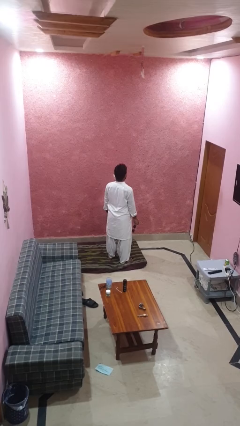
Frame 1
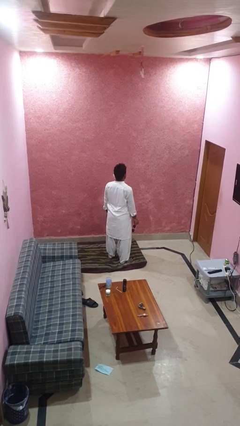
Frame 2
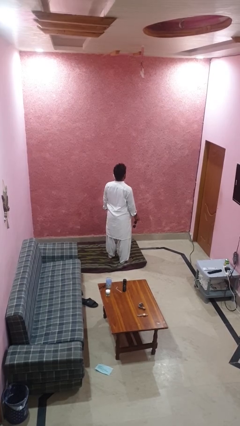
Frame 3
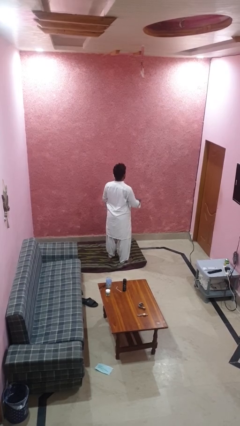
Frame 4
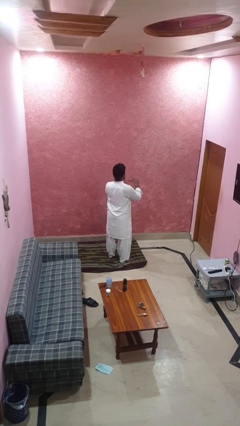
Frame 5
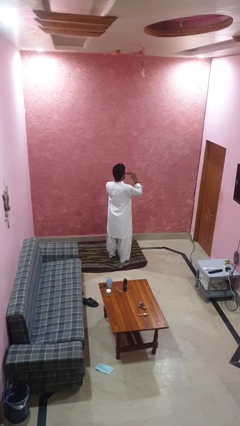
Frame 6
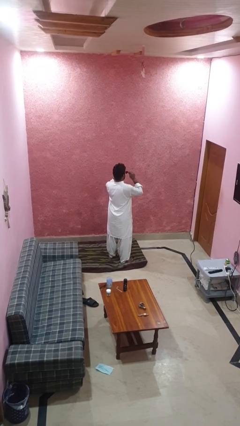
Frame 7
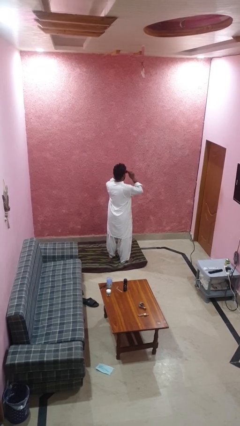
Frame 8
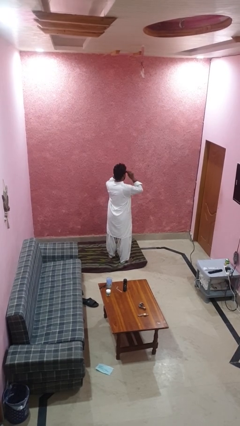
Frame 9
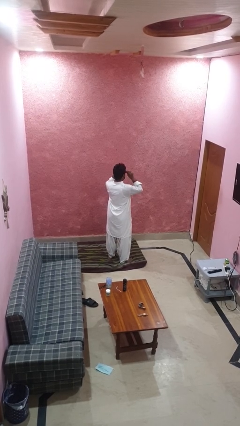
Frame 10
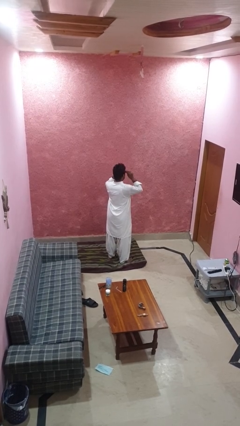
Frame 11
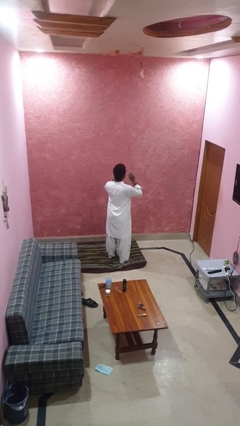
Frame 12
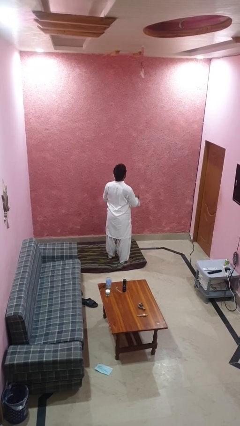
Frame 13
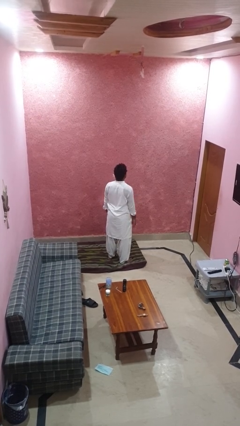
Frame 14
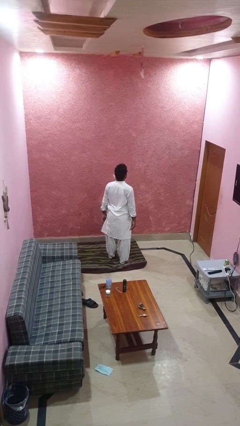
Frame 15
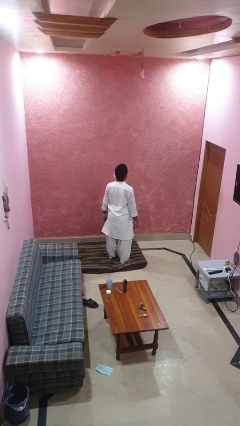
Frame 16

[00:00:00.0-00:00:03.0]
person puts on sunglasses

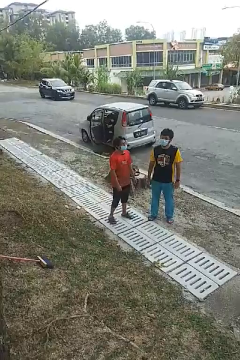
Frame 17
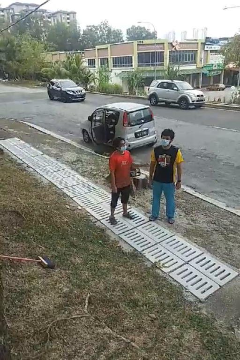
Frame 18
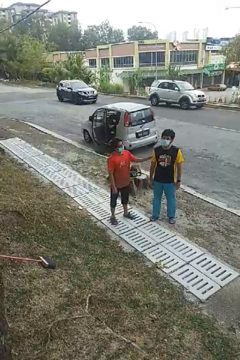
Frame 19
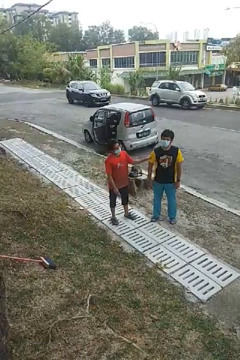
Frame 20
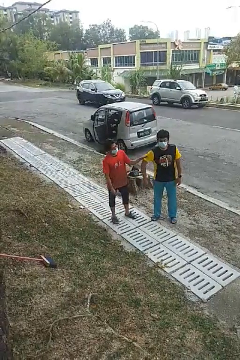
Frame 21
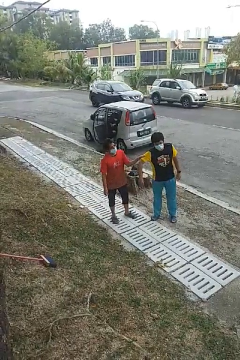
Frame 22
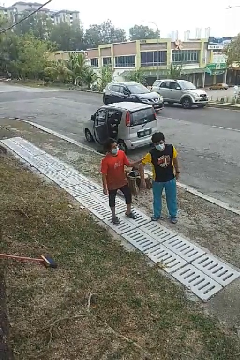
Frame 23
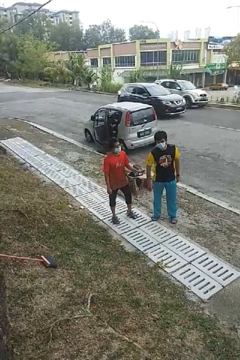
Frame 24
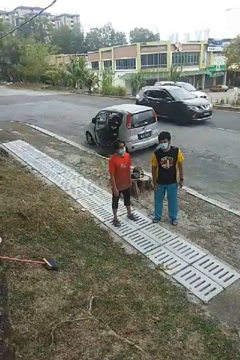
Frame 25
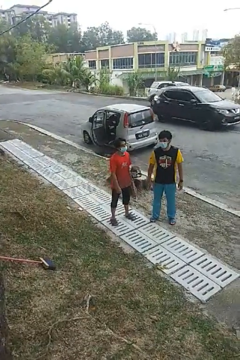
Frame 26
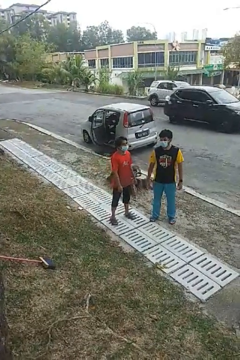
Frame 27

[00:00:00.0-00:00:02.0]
person grabs person by bicep

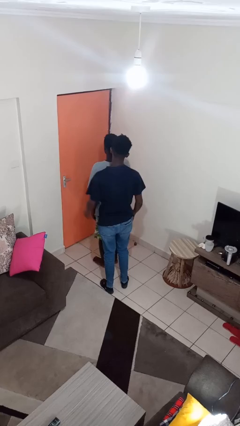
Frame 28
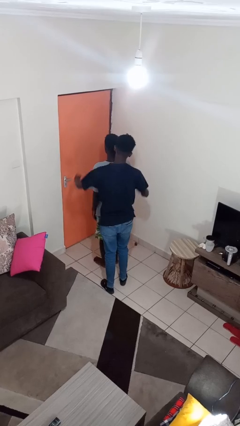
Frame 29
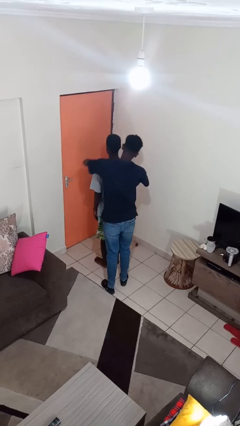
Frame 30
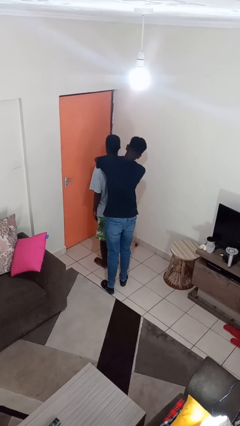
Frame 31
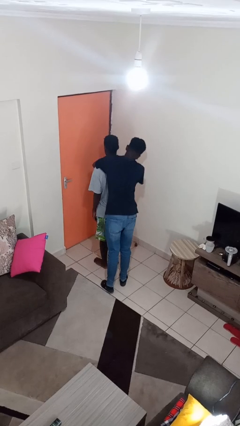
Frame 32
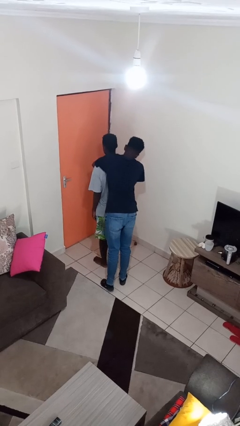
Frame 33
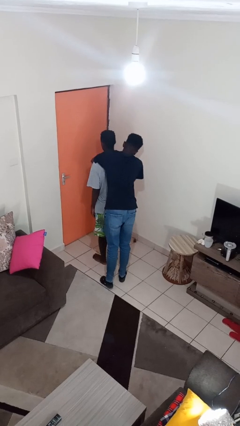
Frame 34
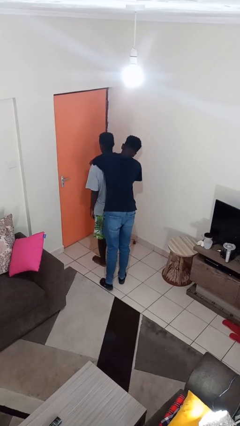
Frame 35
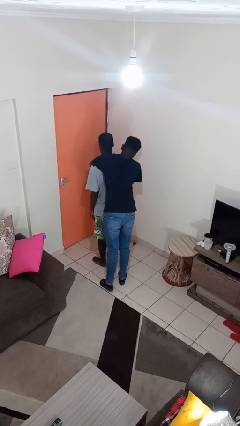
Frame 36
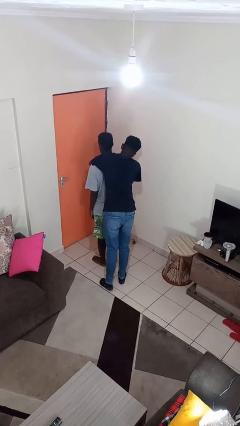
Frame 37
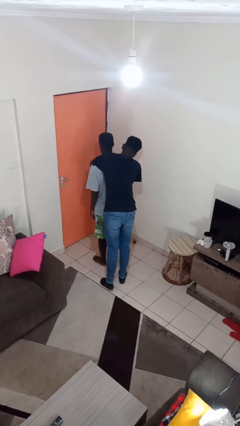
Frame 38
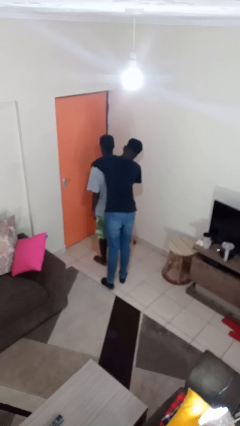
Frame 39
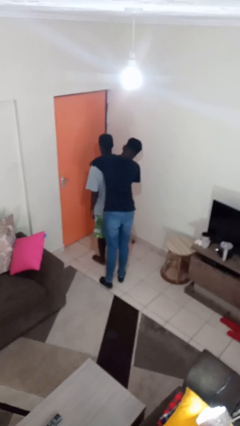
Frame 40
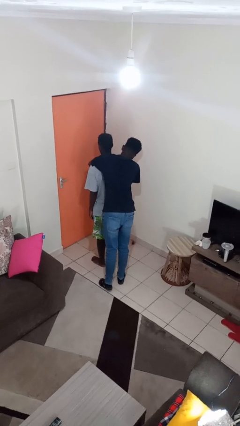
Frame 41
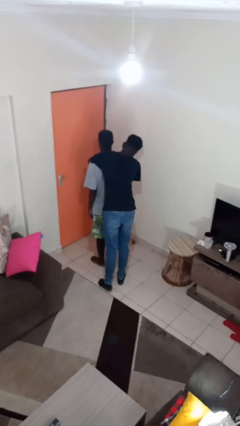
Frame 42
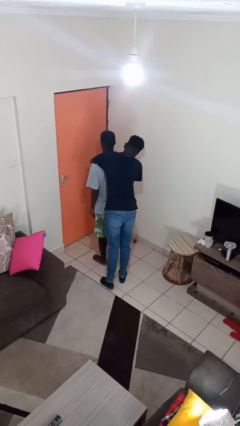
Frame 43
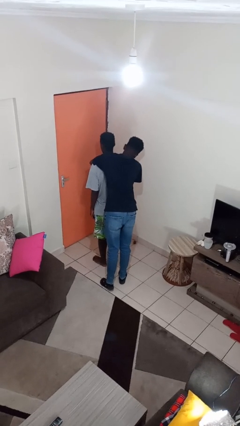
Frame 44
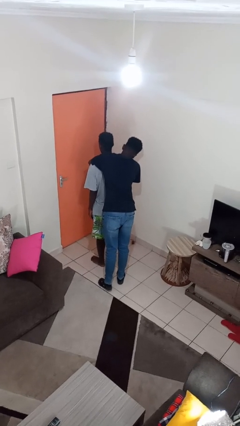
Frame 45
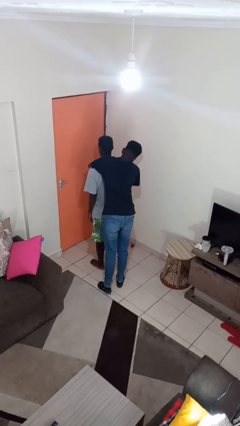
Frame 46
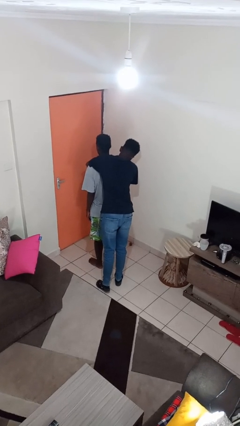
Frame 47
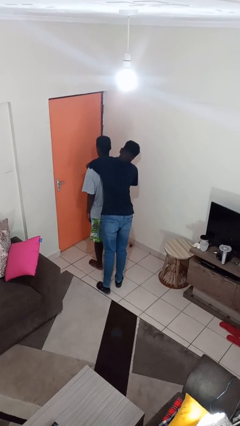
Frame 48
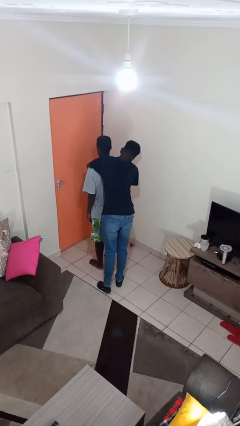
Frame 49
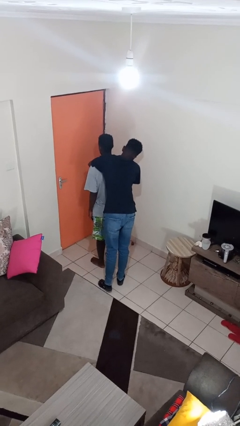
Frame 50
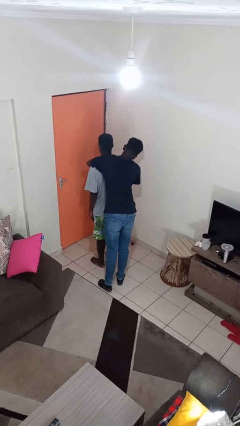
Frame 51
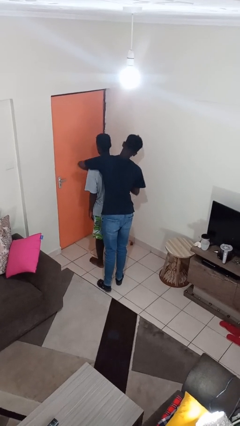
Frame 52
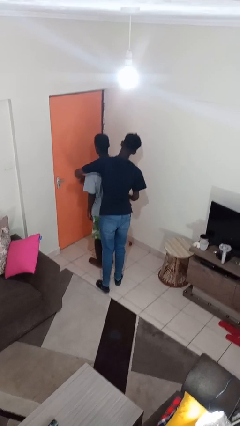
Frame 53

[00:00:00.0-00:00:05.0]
person hugs person from behind

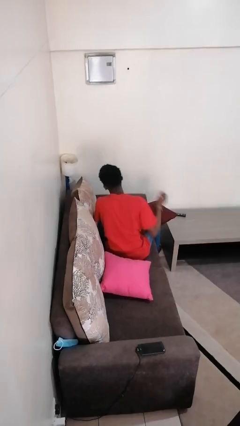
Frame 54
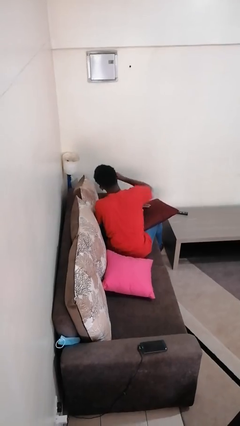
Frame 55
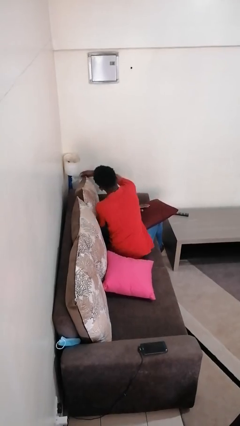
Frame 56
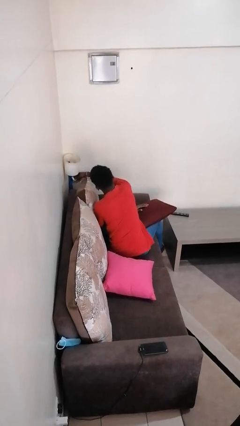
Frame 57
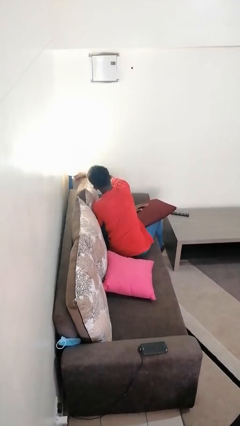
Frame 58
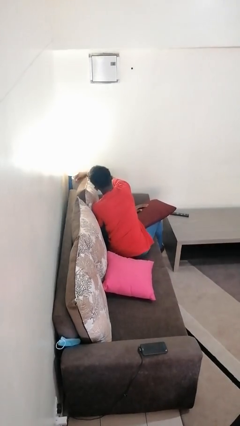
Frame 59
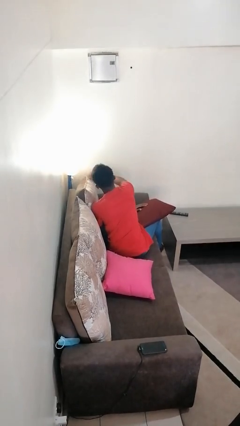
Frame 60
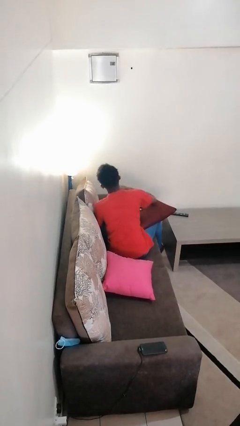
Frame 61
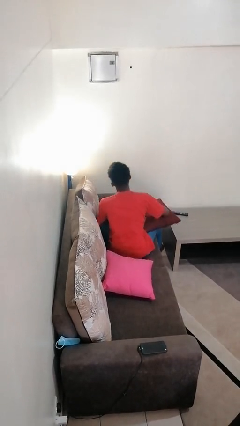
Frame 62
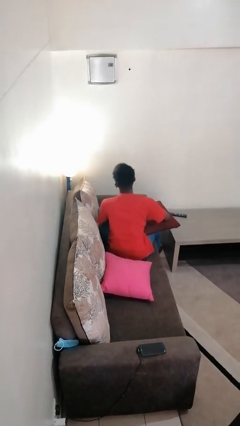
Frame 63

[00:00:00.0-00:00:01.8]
person turns on lamp

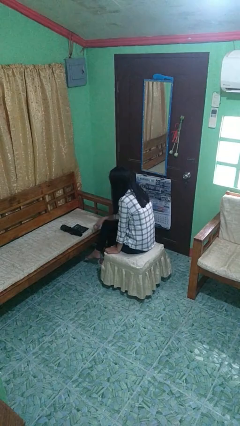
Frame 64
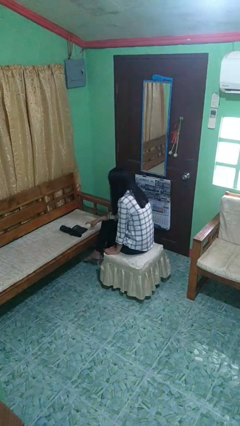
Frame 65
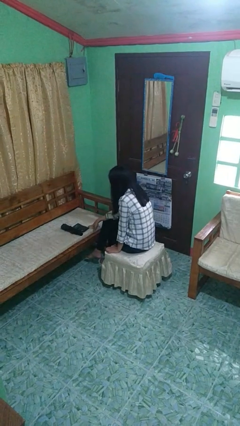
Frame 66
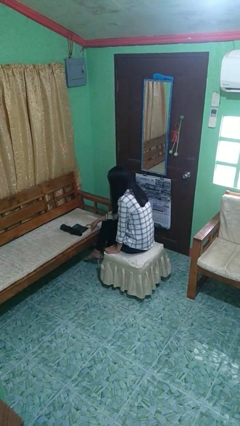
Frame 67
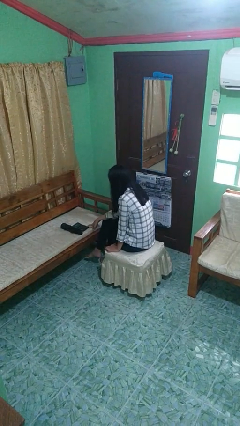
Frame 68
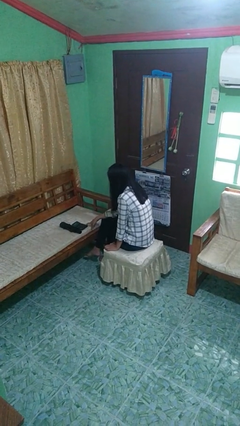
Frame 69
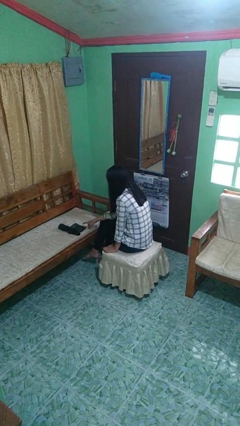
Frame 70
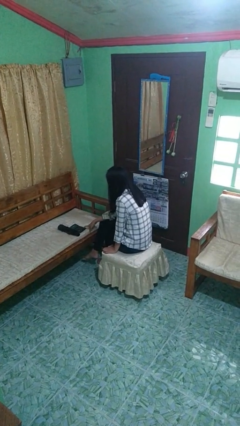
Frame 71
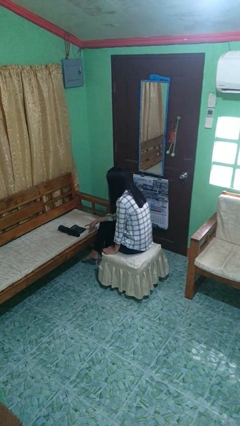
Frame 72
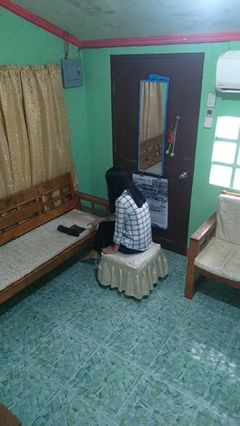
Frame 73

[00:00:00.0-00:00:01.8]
person taps object with finger

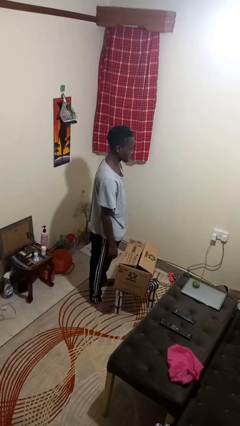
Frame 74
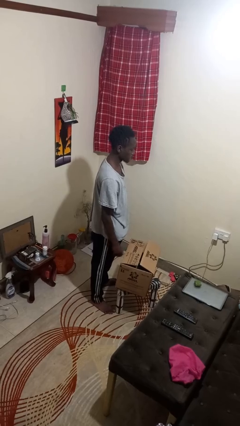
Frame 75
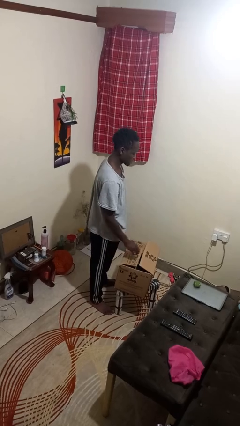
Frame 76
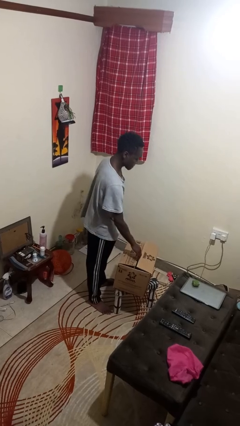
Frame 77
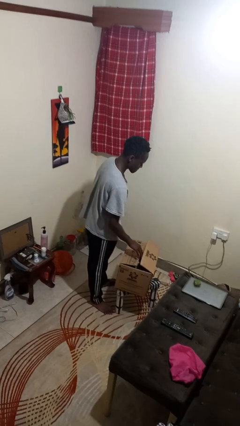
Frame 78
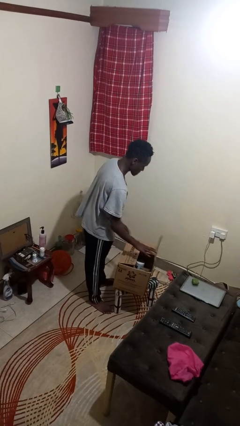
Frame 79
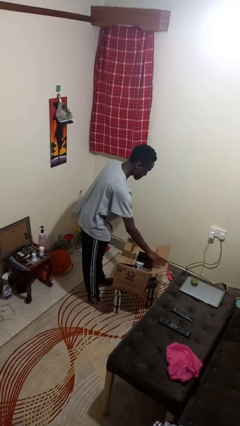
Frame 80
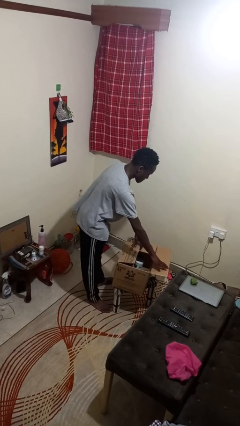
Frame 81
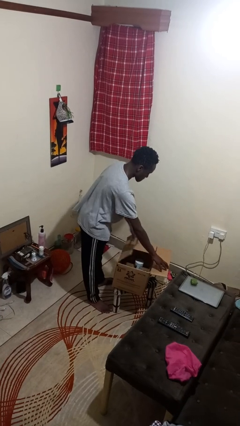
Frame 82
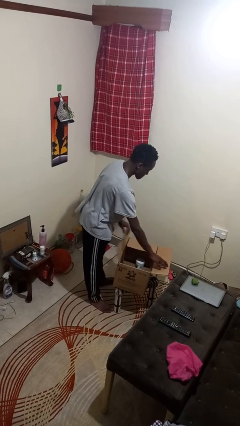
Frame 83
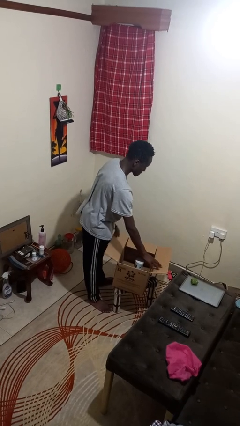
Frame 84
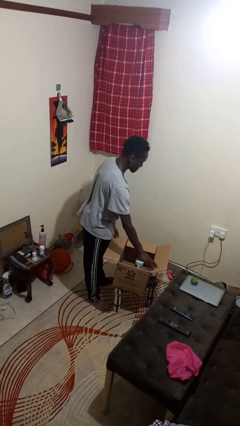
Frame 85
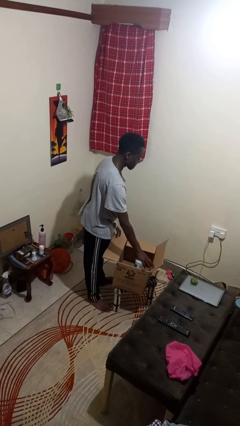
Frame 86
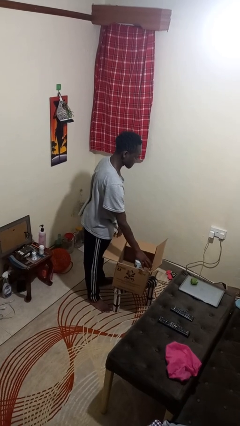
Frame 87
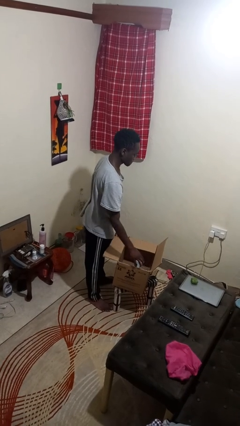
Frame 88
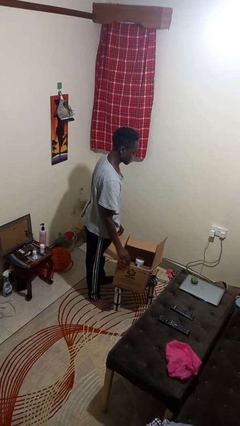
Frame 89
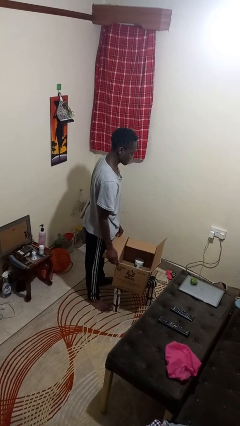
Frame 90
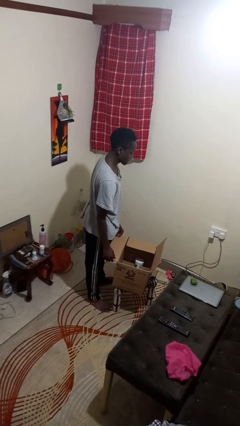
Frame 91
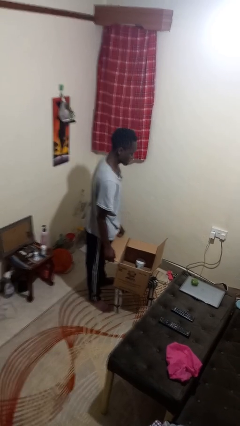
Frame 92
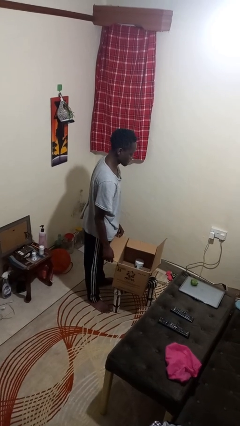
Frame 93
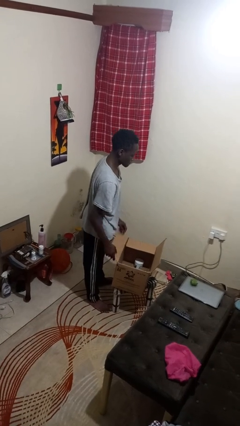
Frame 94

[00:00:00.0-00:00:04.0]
person opens box
